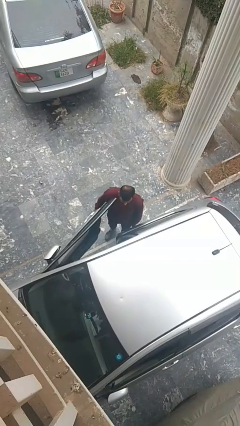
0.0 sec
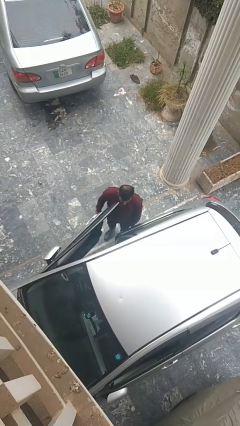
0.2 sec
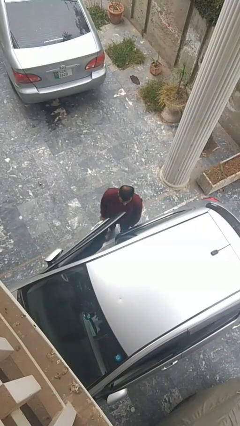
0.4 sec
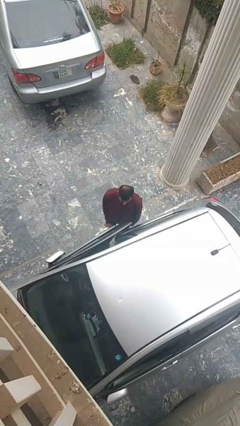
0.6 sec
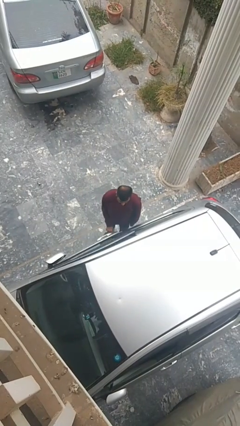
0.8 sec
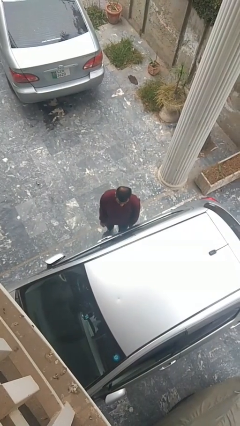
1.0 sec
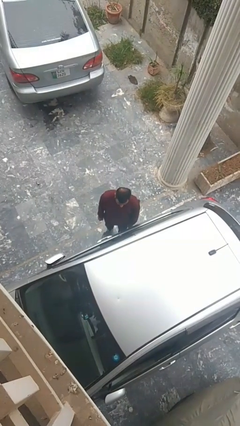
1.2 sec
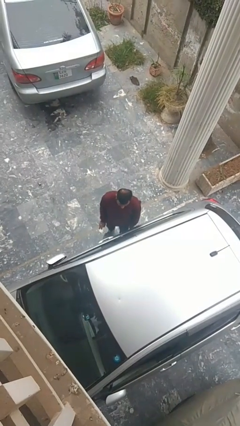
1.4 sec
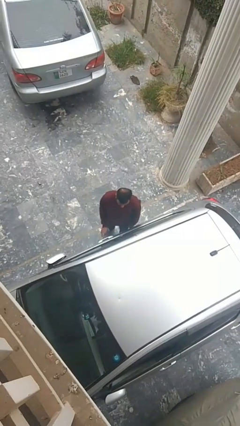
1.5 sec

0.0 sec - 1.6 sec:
person closes car door

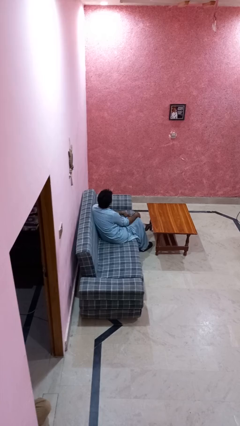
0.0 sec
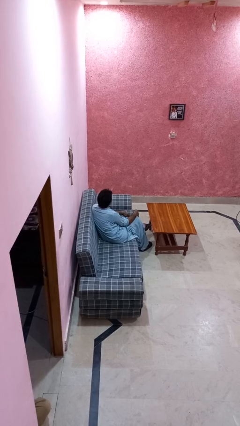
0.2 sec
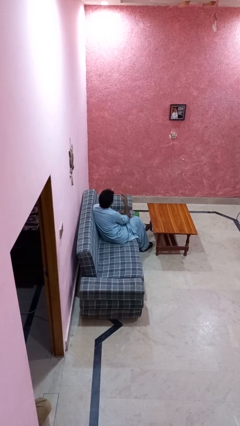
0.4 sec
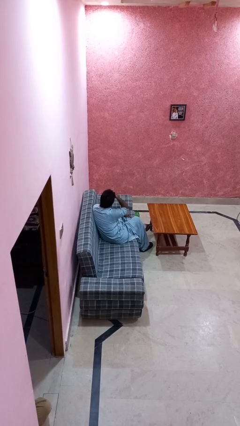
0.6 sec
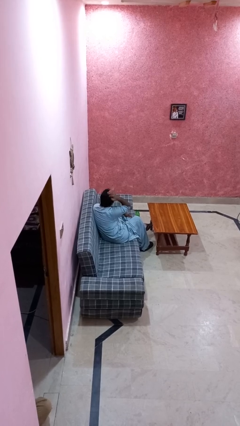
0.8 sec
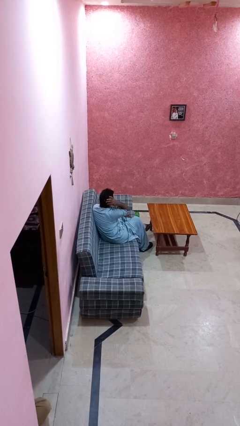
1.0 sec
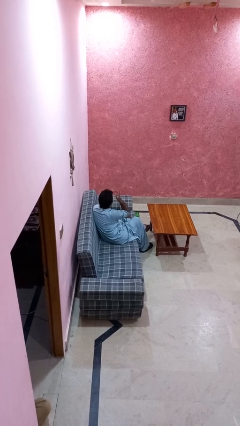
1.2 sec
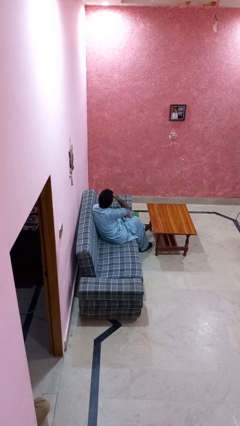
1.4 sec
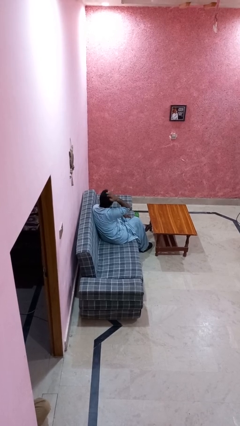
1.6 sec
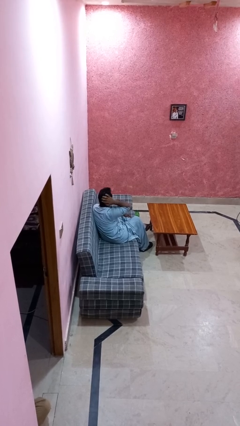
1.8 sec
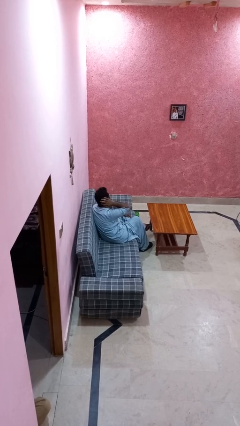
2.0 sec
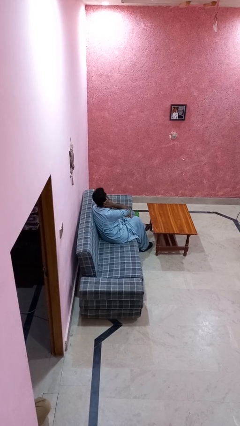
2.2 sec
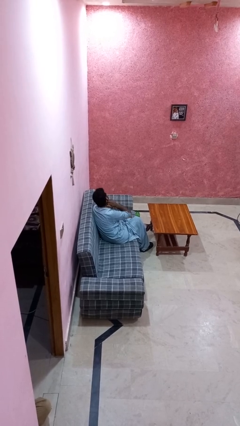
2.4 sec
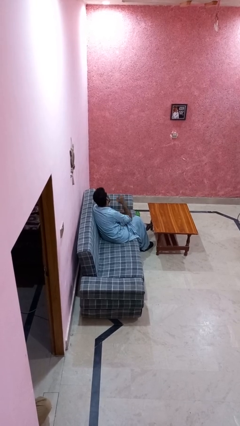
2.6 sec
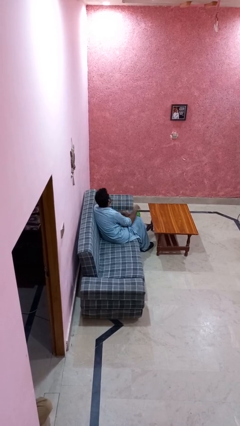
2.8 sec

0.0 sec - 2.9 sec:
person strokes hair

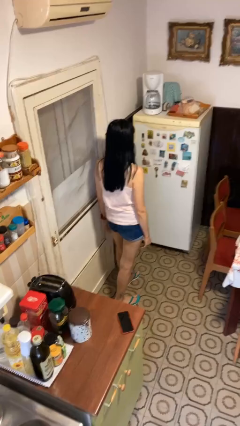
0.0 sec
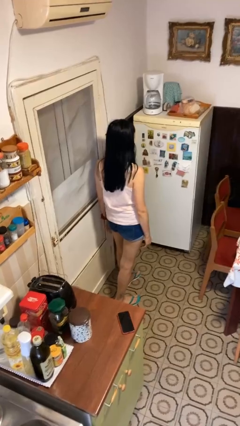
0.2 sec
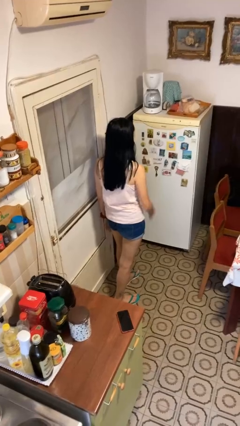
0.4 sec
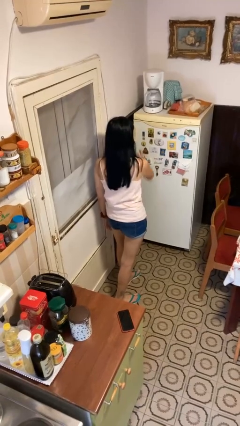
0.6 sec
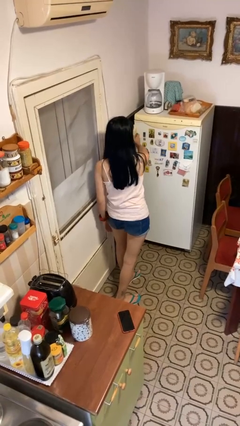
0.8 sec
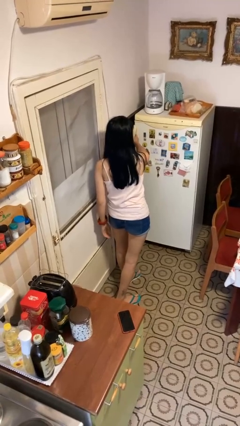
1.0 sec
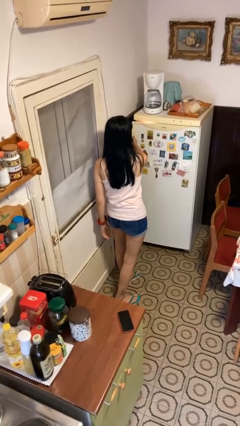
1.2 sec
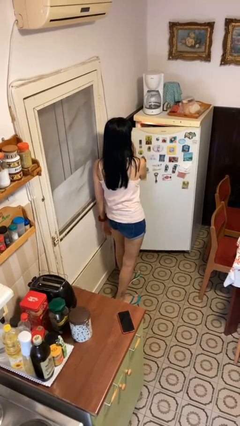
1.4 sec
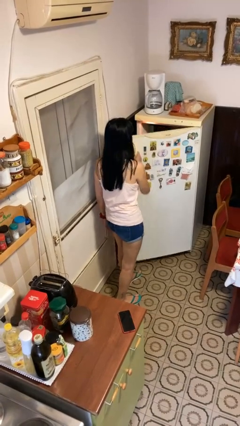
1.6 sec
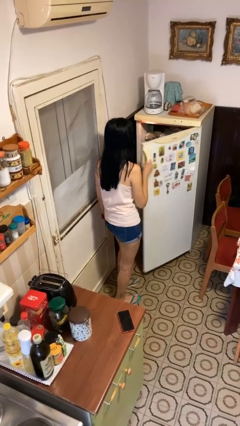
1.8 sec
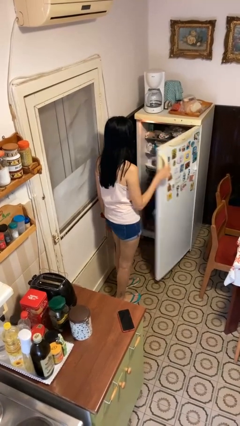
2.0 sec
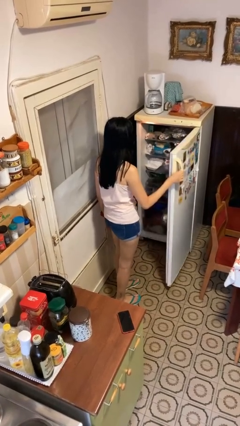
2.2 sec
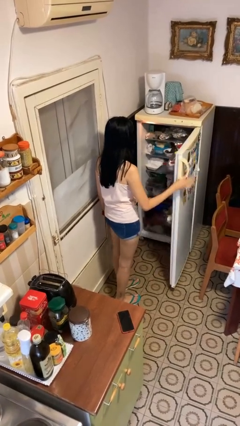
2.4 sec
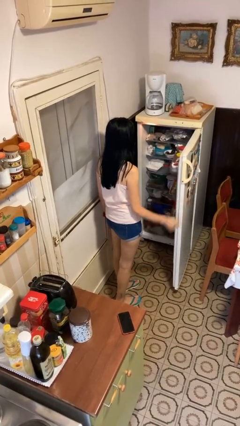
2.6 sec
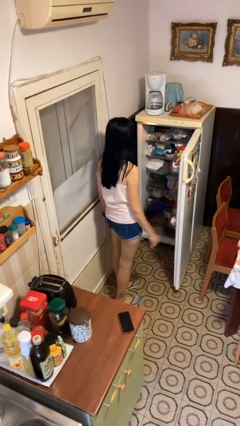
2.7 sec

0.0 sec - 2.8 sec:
person opens refrigerator

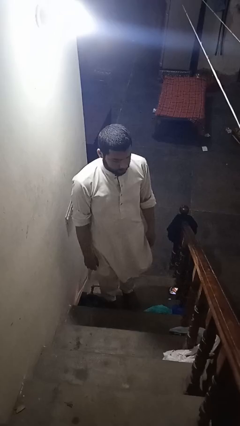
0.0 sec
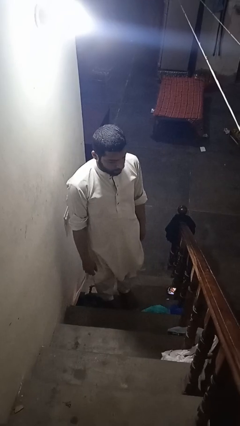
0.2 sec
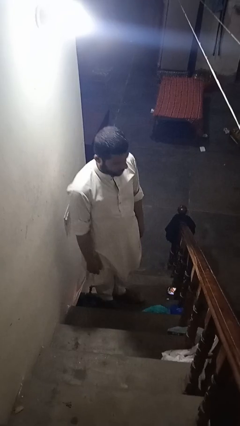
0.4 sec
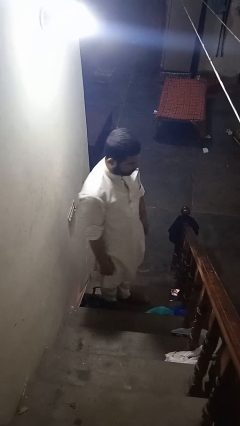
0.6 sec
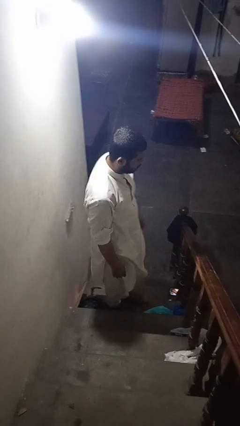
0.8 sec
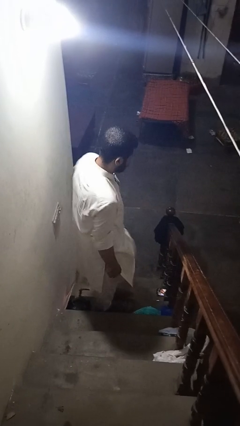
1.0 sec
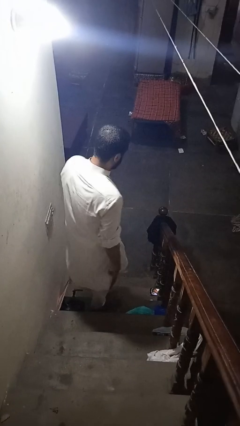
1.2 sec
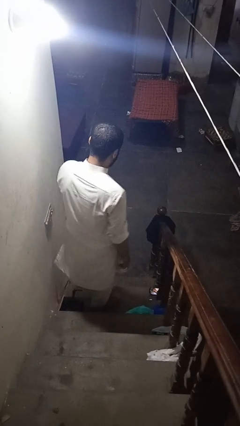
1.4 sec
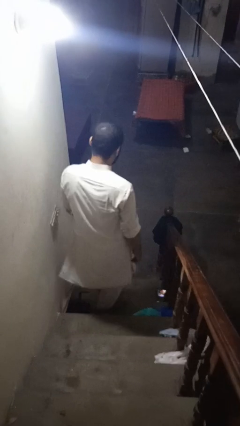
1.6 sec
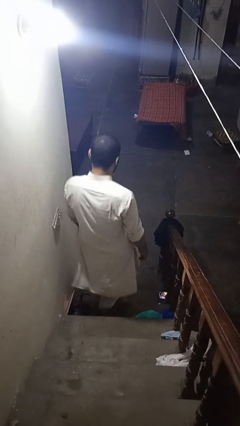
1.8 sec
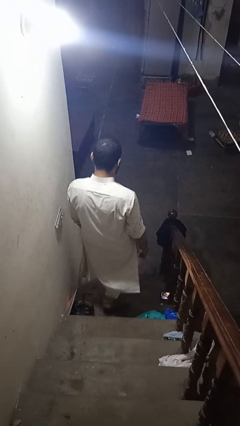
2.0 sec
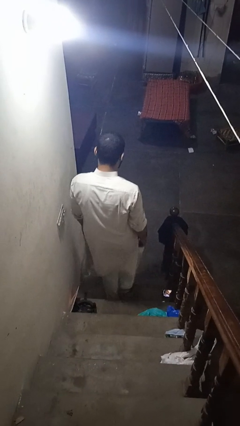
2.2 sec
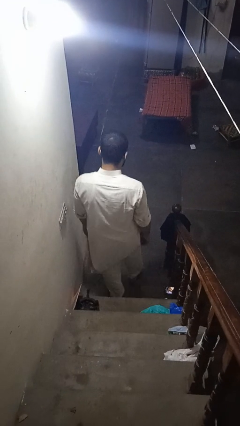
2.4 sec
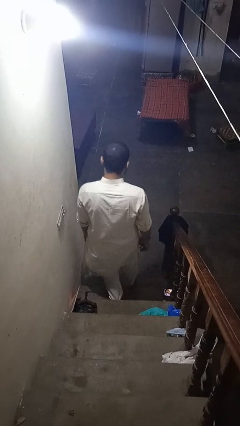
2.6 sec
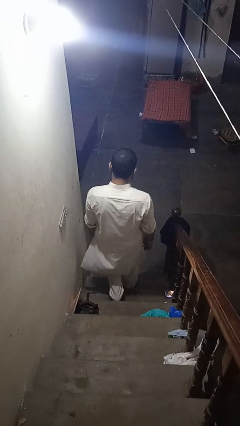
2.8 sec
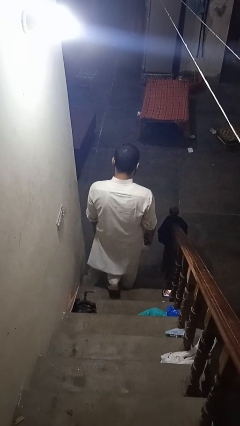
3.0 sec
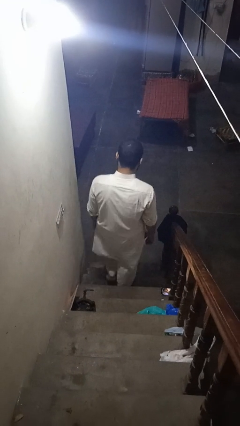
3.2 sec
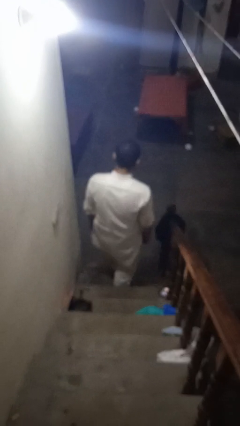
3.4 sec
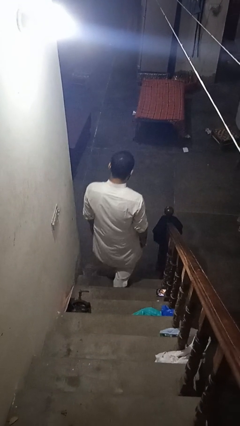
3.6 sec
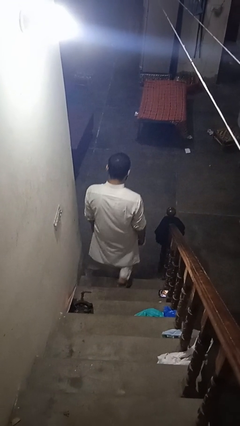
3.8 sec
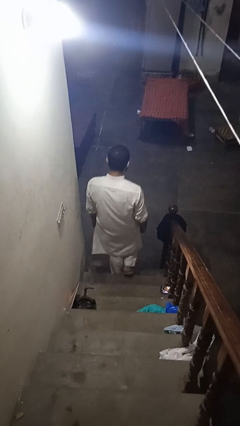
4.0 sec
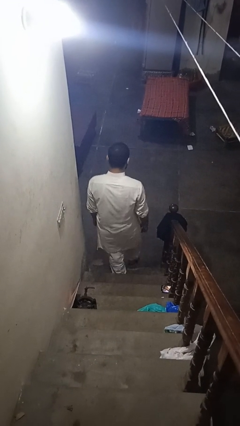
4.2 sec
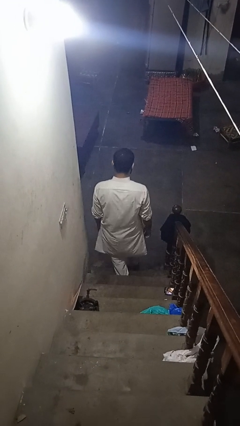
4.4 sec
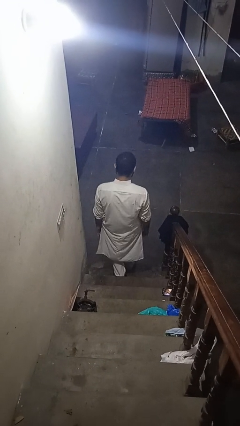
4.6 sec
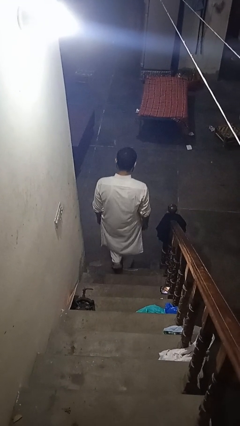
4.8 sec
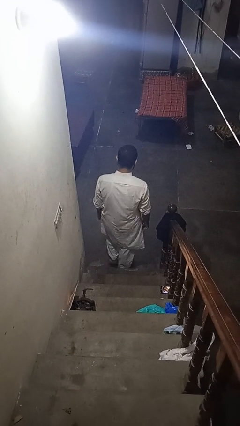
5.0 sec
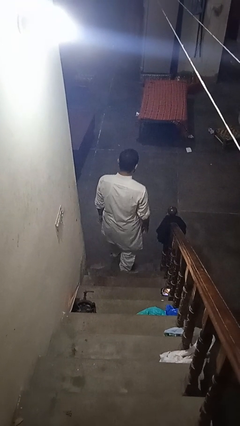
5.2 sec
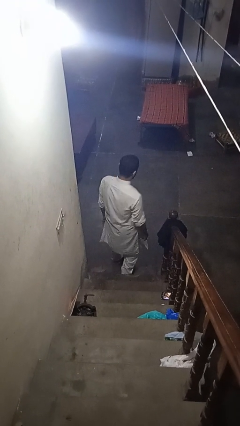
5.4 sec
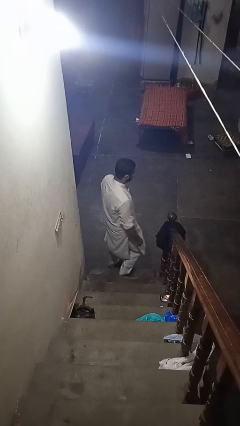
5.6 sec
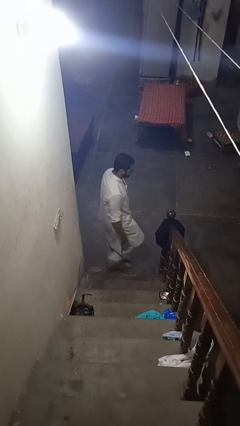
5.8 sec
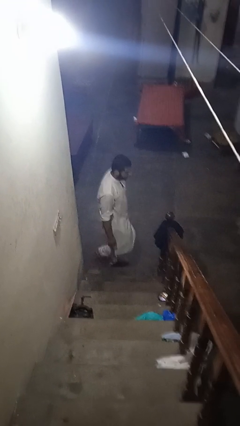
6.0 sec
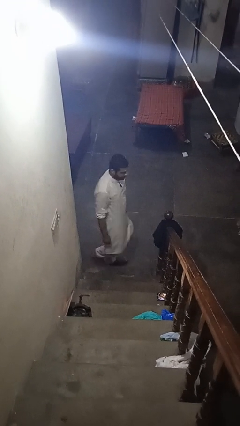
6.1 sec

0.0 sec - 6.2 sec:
person climbs down stairs

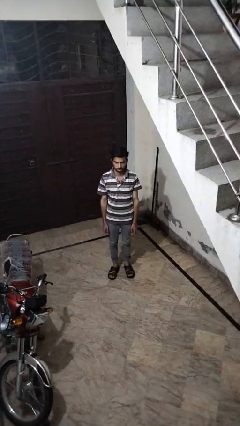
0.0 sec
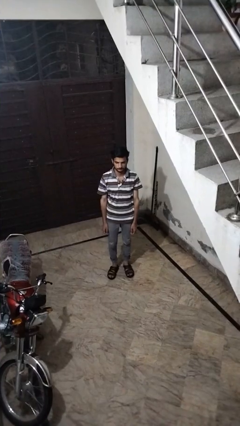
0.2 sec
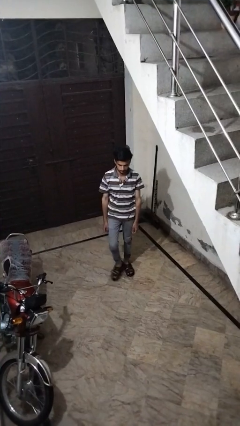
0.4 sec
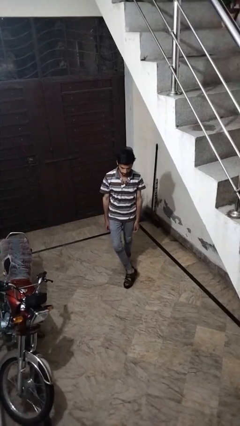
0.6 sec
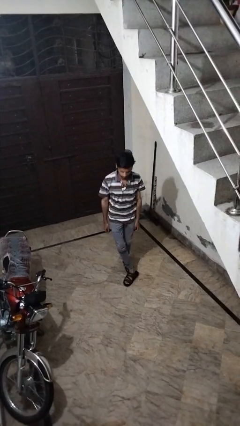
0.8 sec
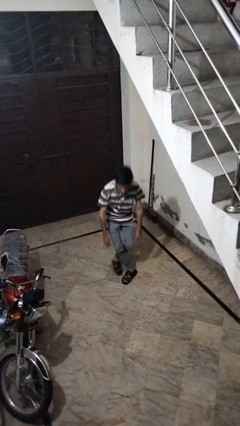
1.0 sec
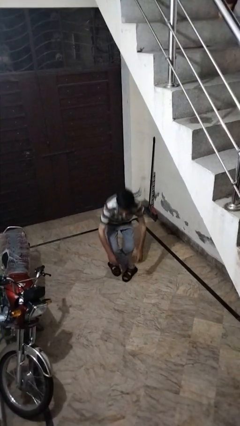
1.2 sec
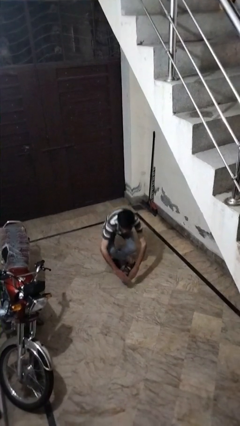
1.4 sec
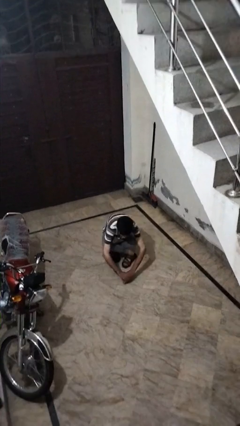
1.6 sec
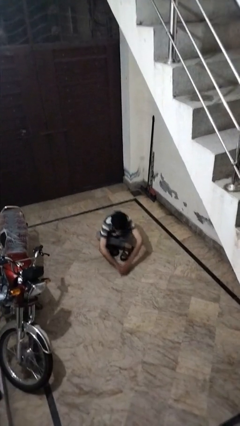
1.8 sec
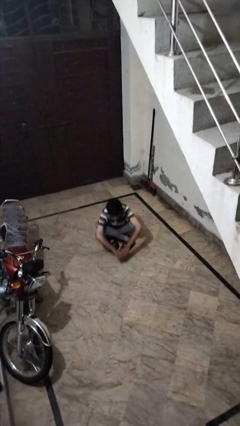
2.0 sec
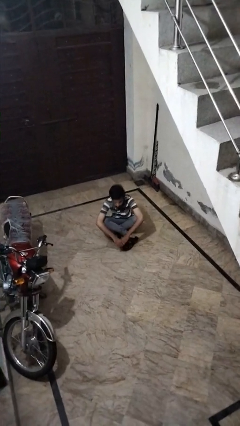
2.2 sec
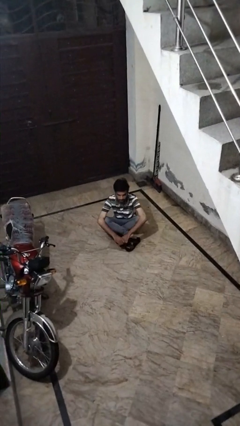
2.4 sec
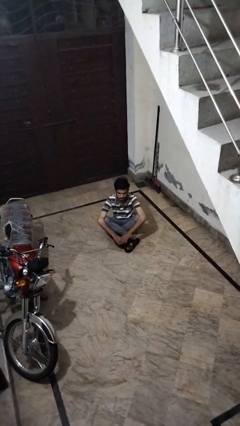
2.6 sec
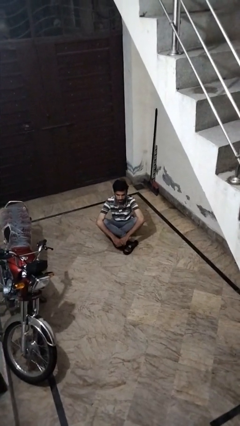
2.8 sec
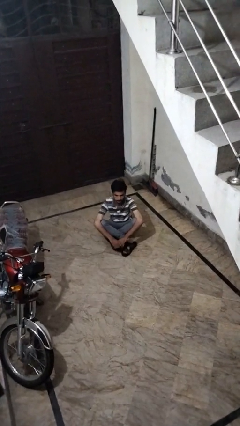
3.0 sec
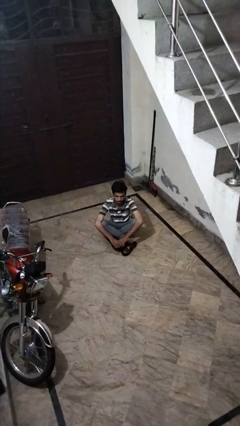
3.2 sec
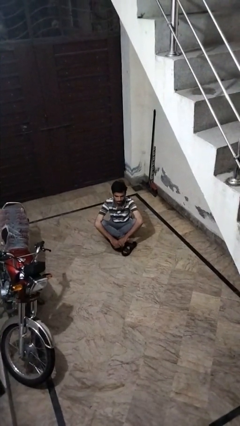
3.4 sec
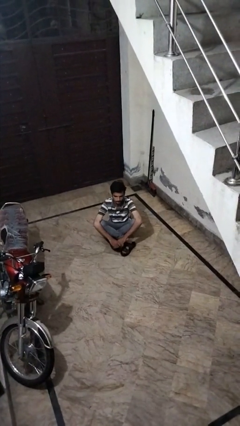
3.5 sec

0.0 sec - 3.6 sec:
person sits crisscross

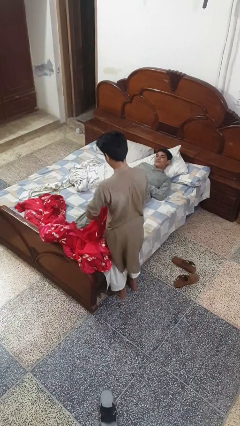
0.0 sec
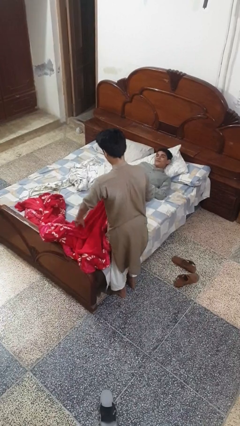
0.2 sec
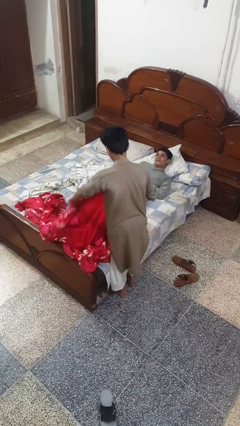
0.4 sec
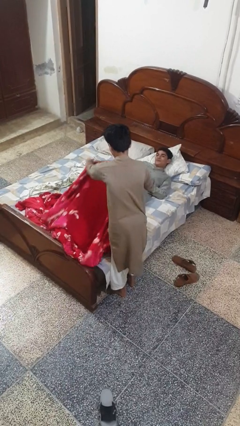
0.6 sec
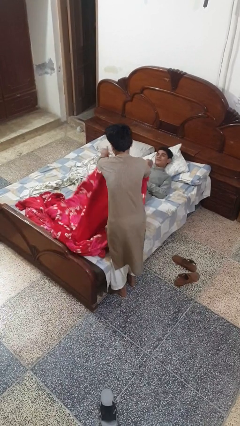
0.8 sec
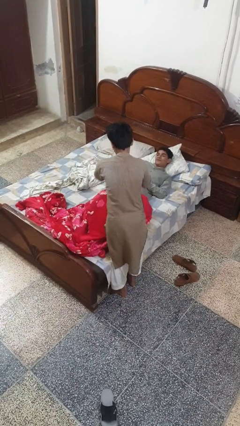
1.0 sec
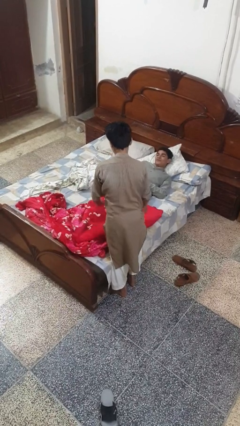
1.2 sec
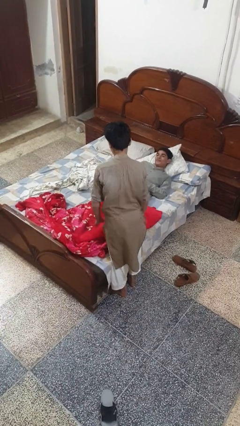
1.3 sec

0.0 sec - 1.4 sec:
person covers friend with blanket
